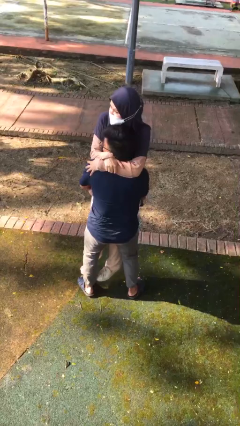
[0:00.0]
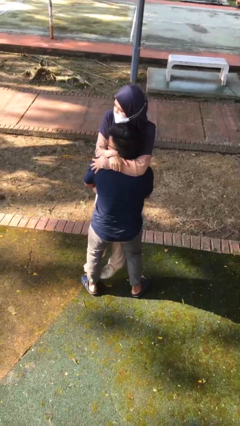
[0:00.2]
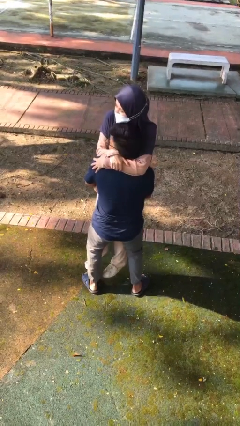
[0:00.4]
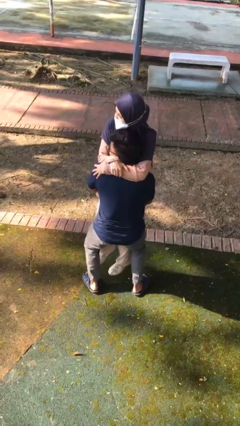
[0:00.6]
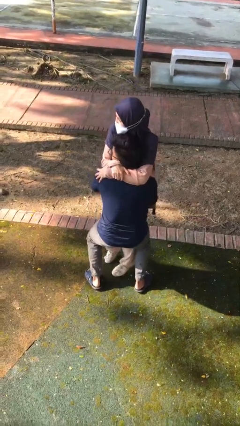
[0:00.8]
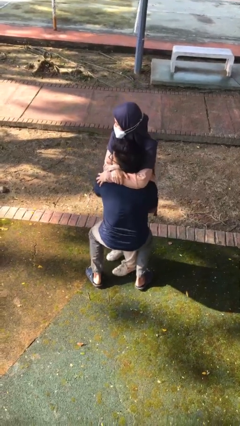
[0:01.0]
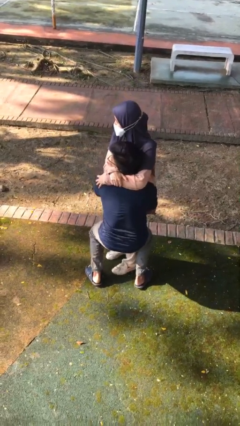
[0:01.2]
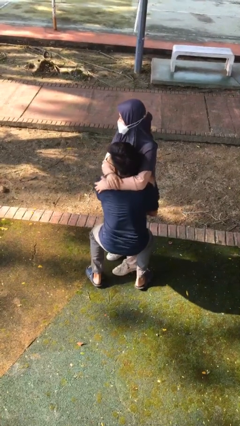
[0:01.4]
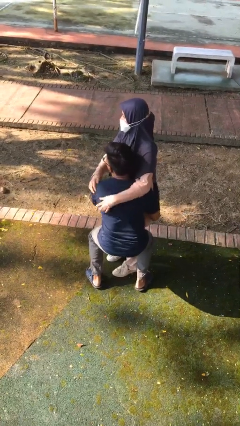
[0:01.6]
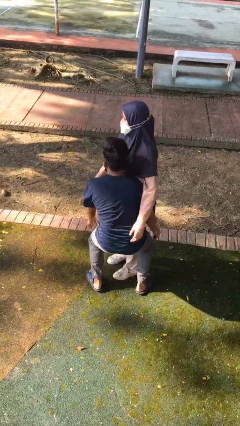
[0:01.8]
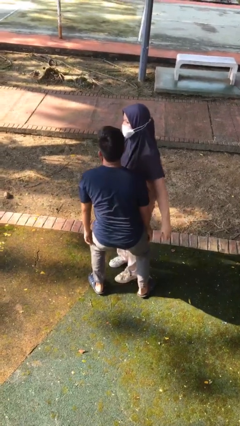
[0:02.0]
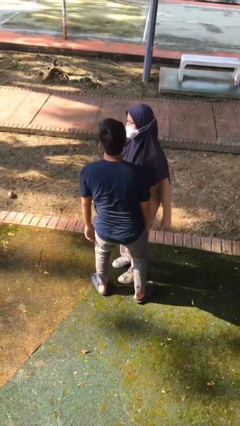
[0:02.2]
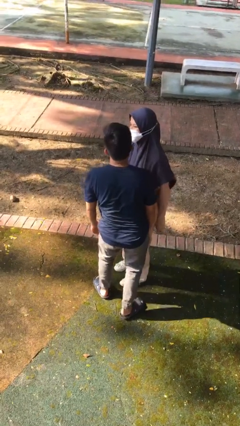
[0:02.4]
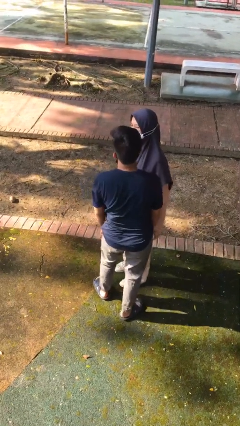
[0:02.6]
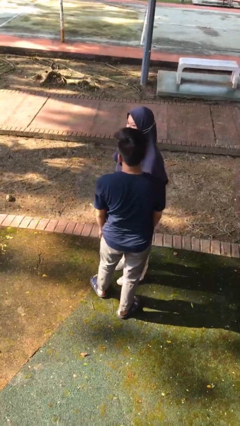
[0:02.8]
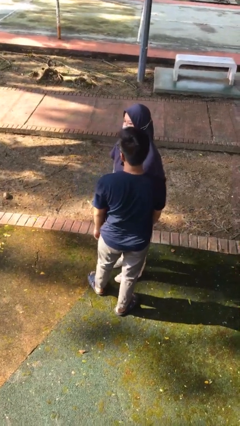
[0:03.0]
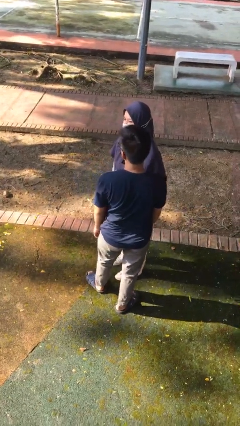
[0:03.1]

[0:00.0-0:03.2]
person puts down person

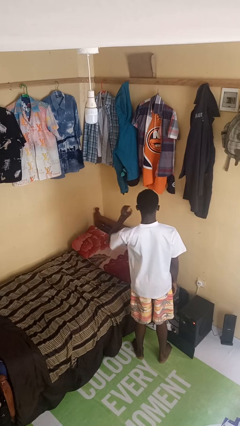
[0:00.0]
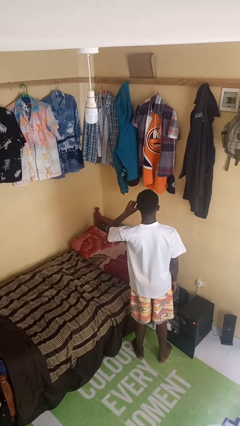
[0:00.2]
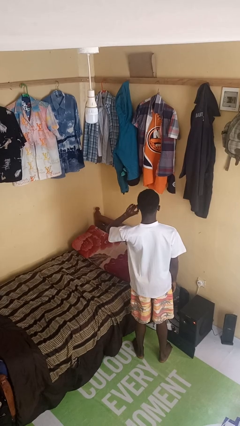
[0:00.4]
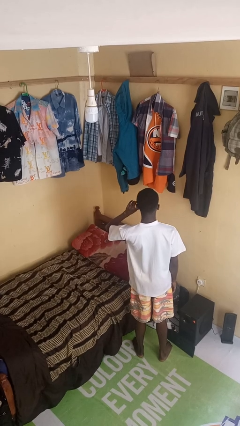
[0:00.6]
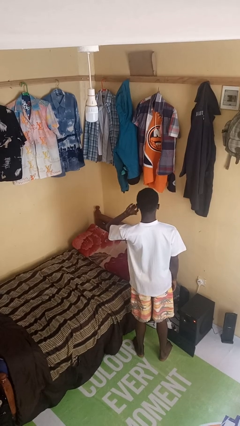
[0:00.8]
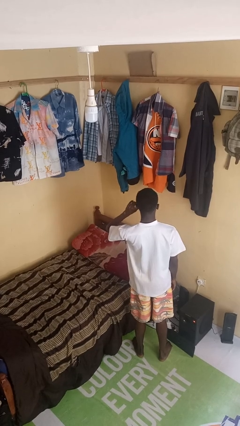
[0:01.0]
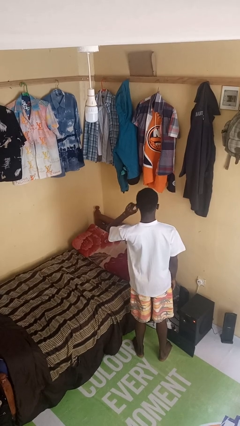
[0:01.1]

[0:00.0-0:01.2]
person gestures listen closely

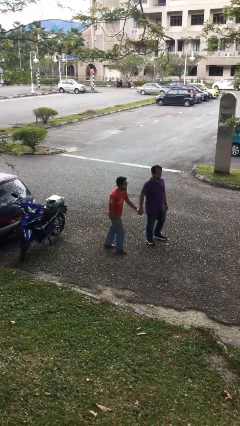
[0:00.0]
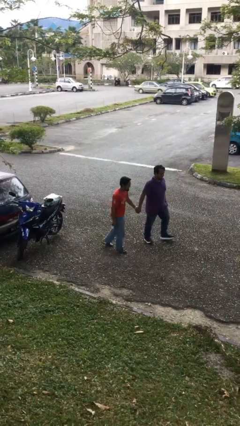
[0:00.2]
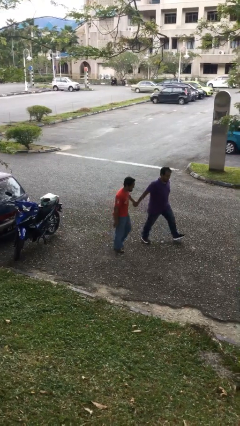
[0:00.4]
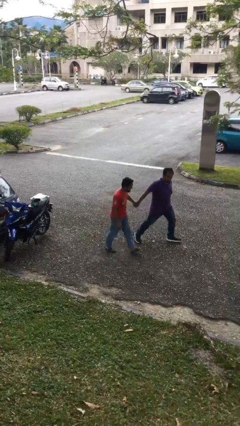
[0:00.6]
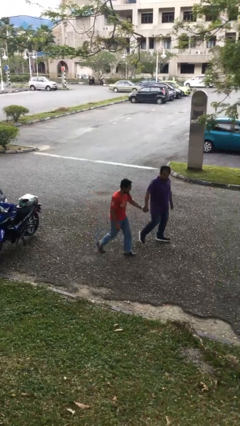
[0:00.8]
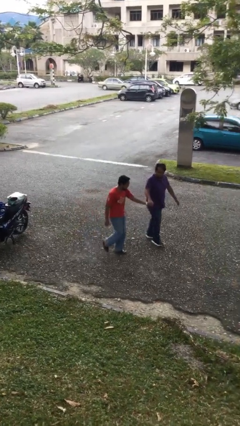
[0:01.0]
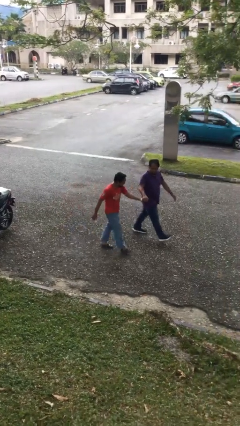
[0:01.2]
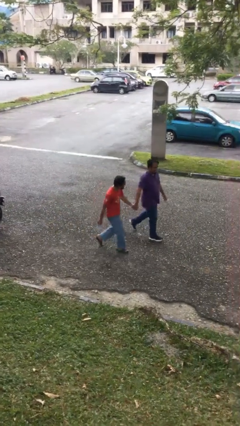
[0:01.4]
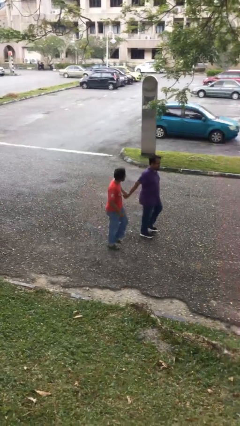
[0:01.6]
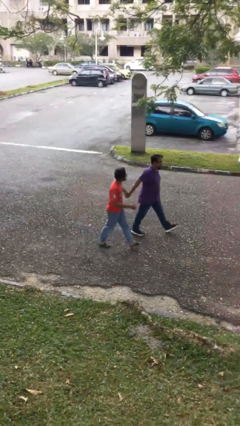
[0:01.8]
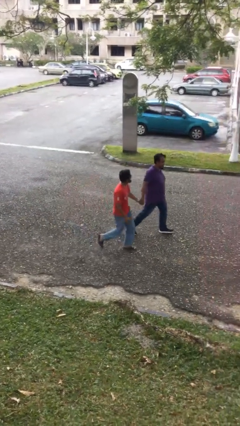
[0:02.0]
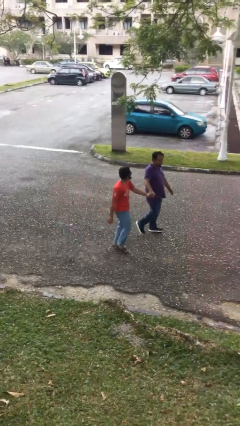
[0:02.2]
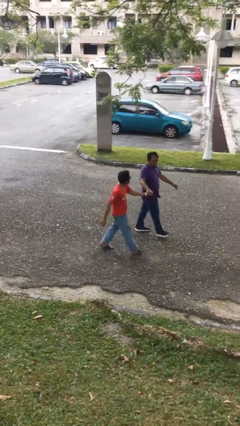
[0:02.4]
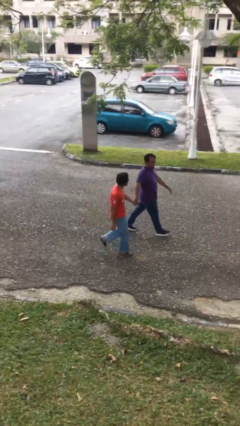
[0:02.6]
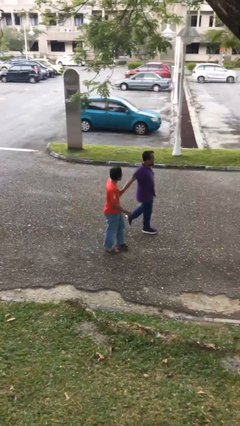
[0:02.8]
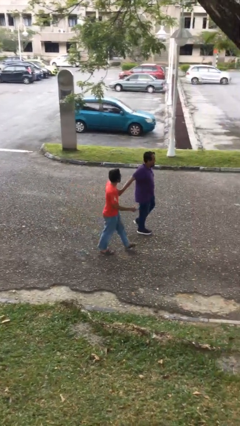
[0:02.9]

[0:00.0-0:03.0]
person holds hand

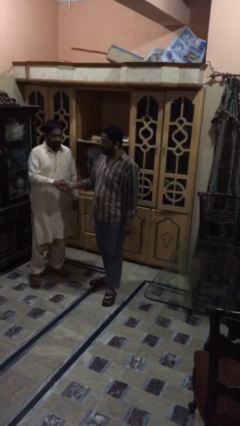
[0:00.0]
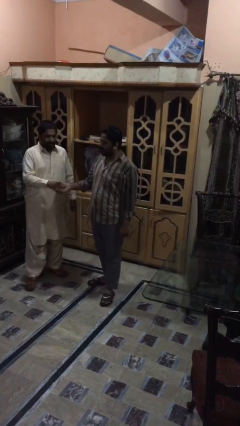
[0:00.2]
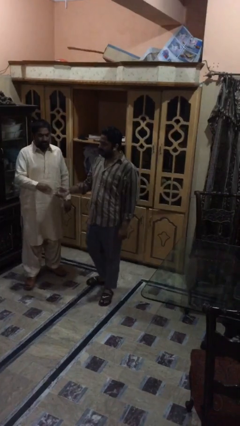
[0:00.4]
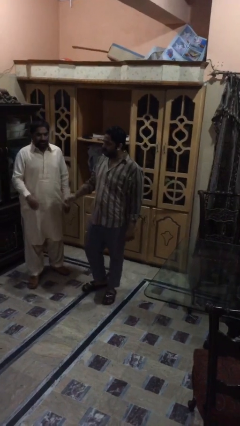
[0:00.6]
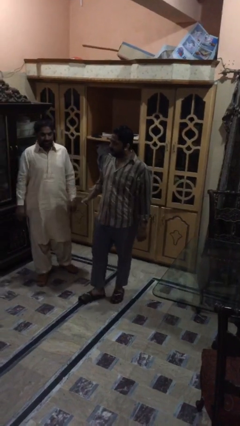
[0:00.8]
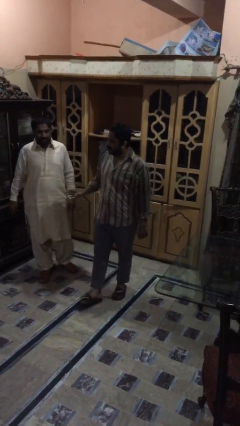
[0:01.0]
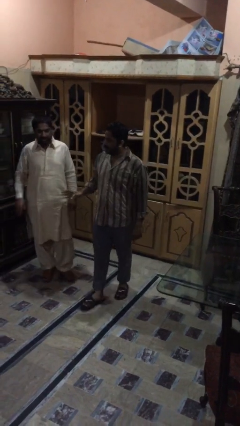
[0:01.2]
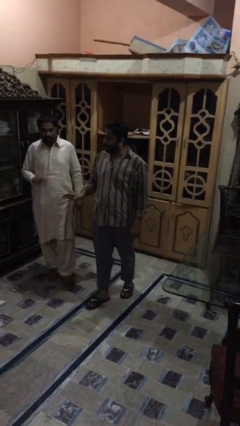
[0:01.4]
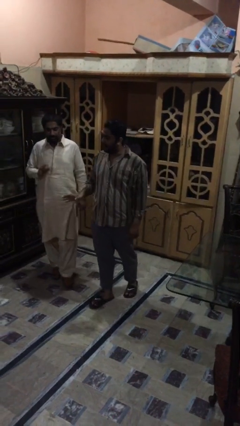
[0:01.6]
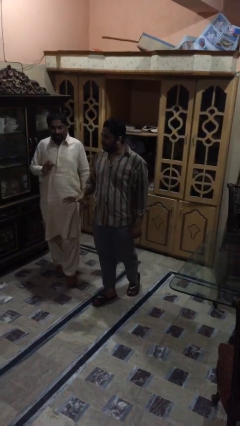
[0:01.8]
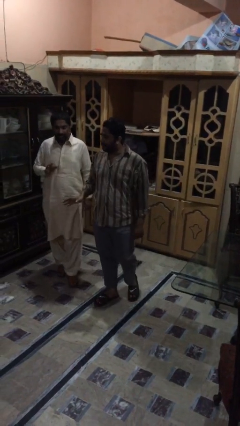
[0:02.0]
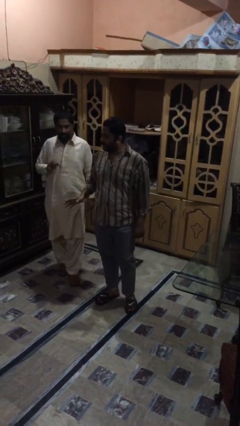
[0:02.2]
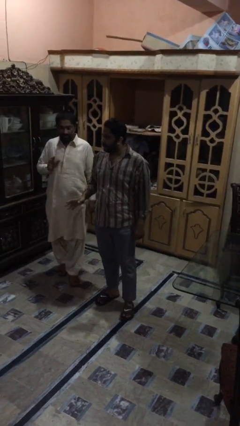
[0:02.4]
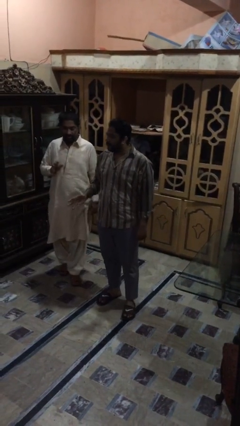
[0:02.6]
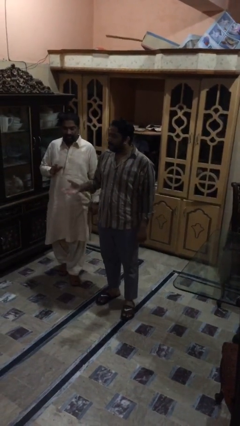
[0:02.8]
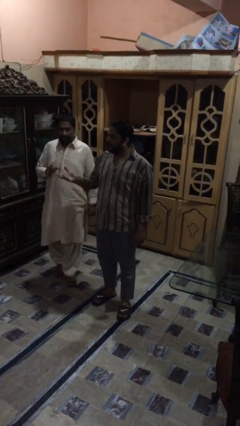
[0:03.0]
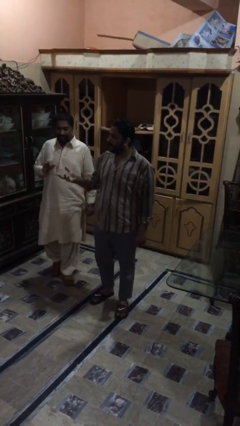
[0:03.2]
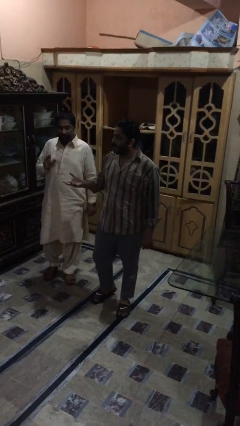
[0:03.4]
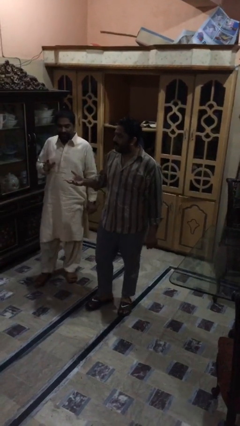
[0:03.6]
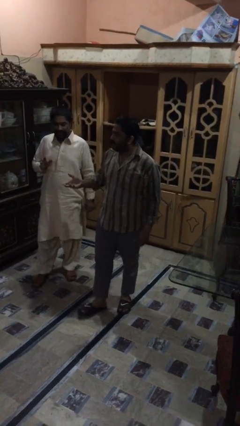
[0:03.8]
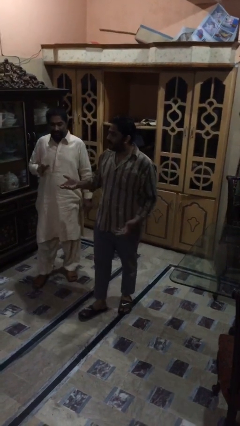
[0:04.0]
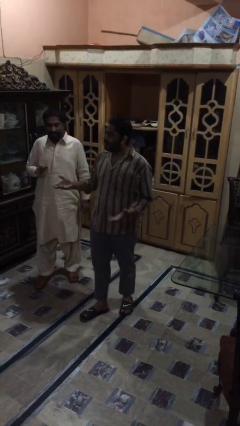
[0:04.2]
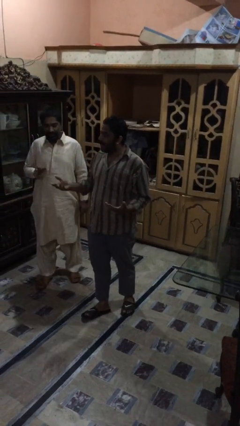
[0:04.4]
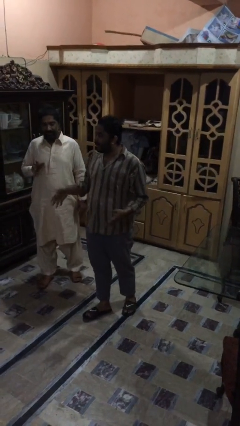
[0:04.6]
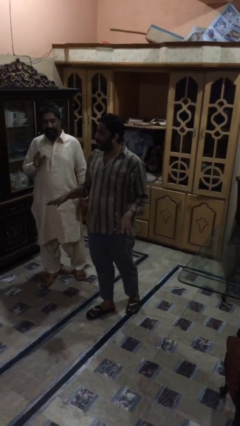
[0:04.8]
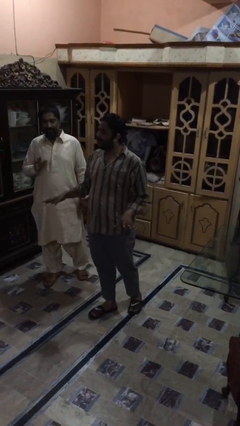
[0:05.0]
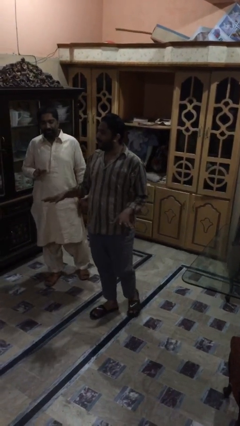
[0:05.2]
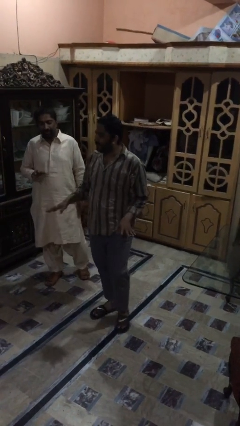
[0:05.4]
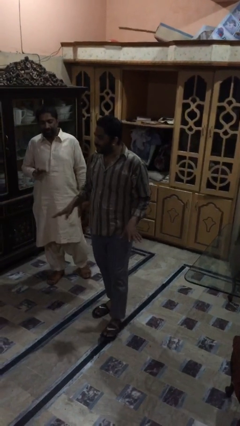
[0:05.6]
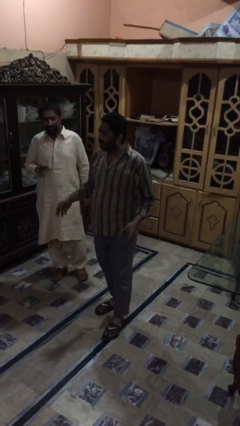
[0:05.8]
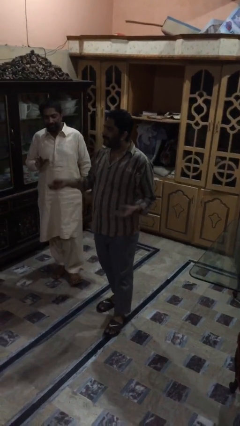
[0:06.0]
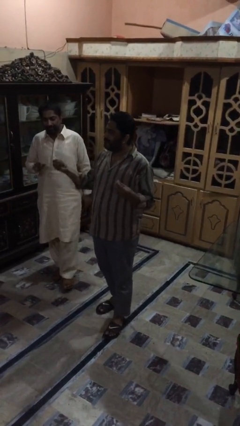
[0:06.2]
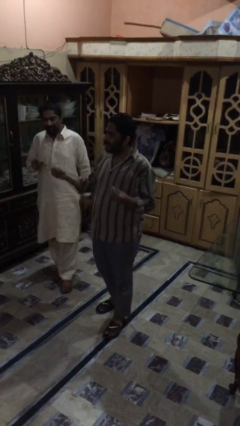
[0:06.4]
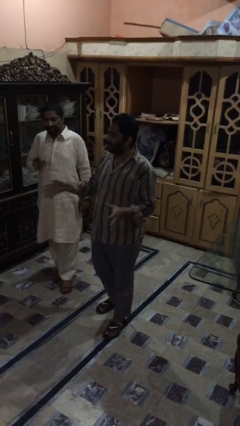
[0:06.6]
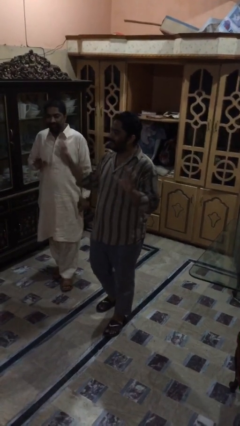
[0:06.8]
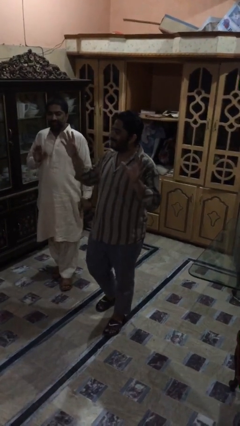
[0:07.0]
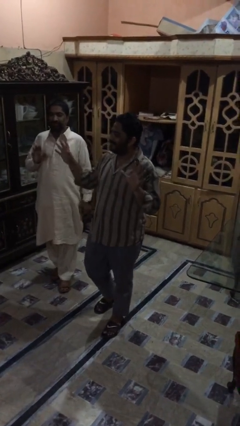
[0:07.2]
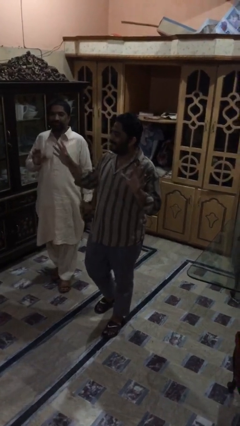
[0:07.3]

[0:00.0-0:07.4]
person talks to person

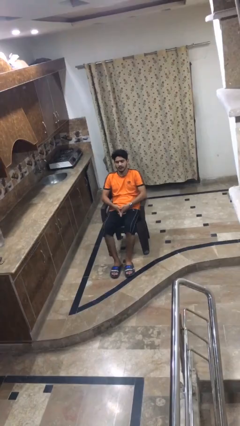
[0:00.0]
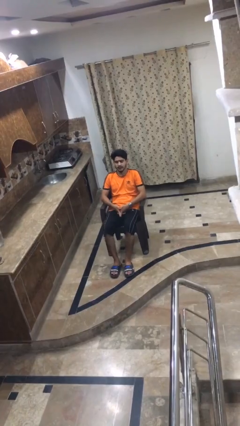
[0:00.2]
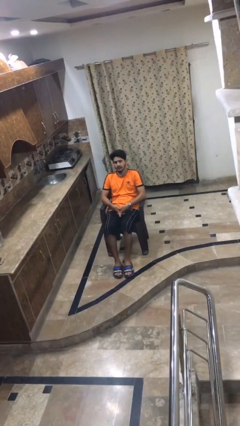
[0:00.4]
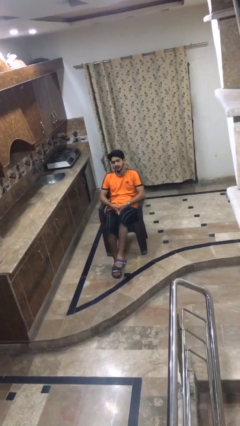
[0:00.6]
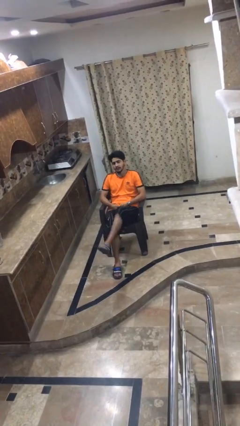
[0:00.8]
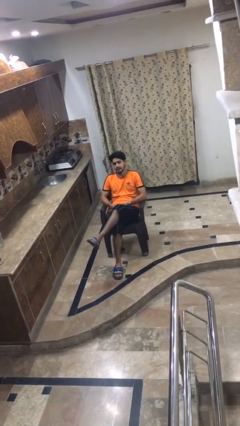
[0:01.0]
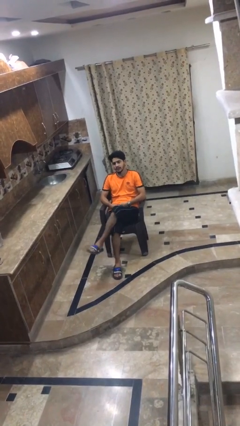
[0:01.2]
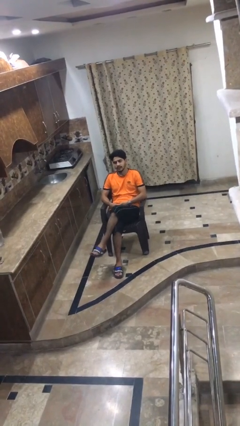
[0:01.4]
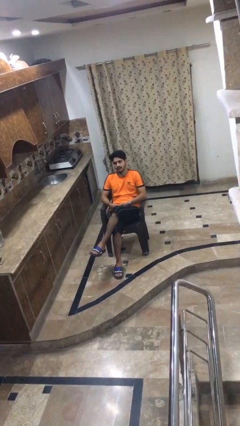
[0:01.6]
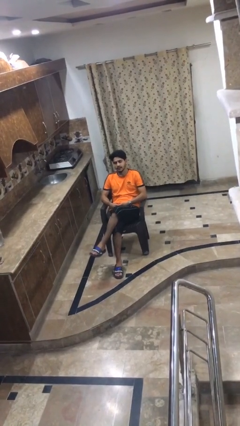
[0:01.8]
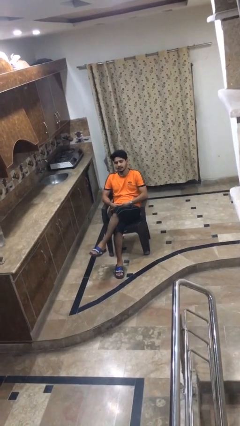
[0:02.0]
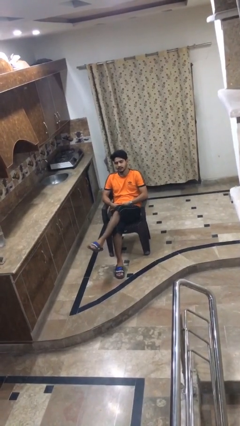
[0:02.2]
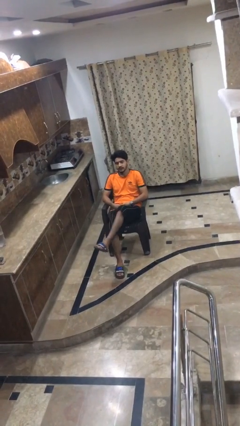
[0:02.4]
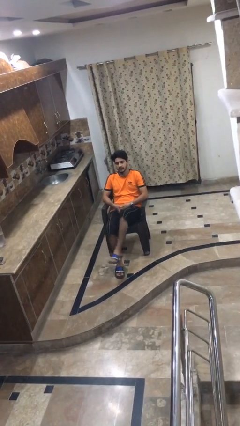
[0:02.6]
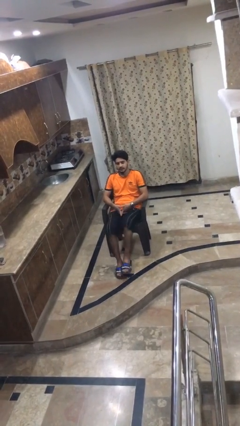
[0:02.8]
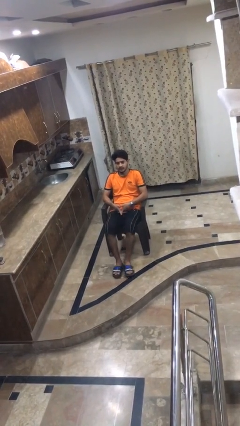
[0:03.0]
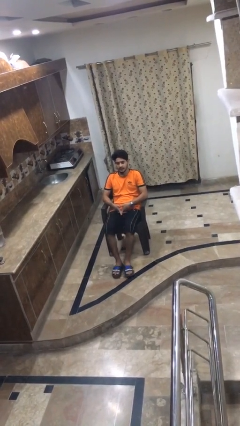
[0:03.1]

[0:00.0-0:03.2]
person crosses legs
